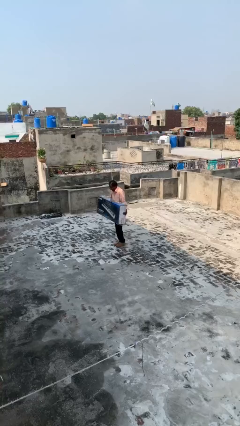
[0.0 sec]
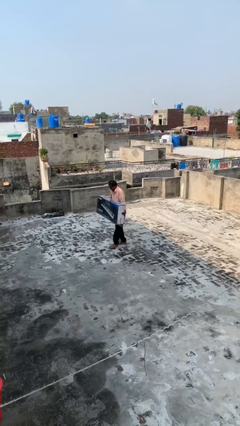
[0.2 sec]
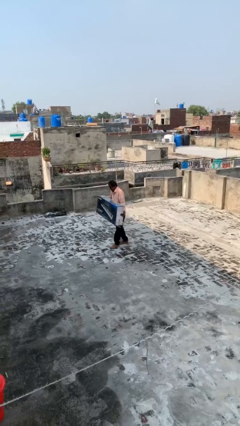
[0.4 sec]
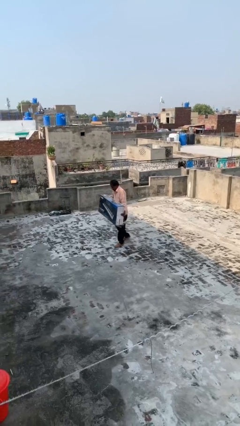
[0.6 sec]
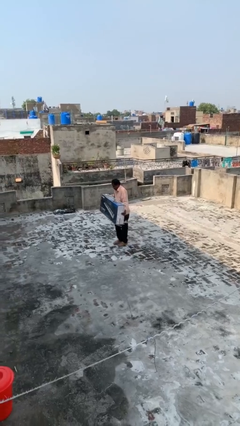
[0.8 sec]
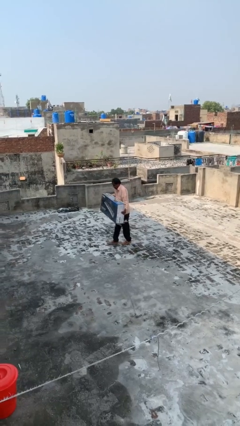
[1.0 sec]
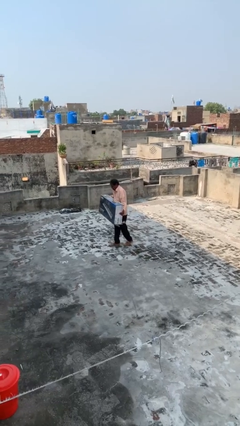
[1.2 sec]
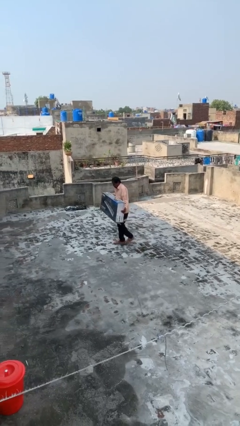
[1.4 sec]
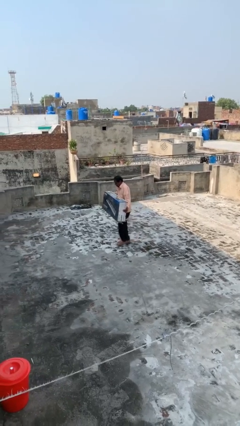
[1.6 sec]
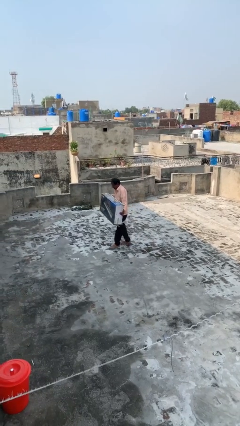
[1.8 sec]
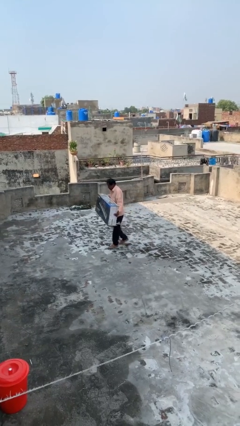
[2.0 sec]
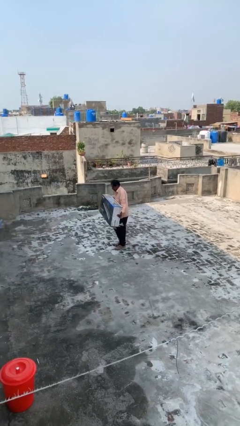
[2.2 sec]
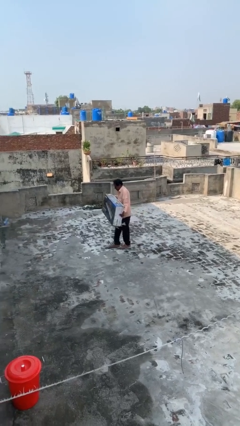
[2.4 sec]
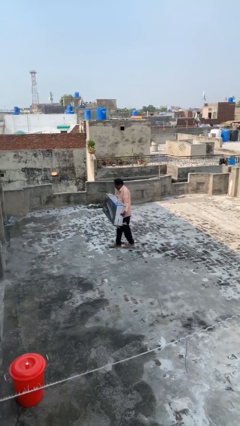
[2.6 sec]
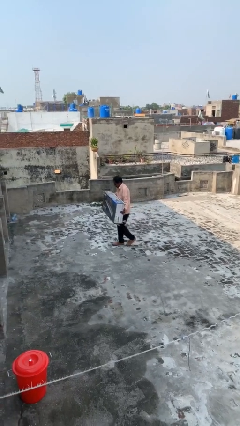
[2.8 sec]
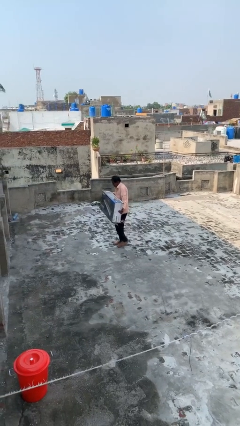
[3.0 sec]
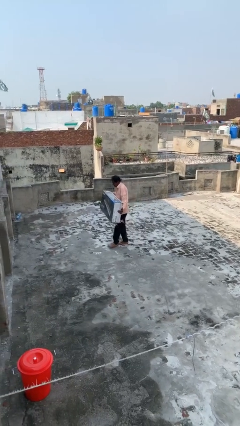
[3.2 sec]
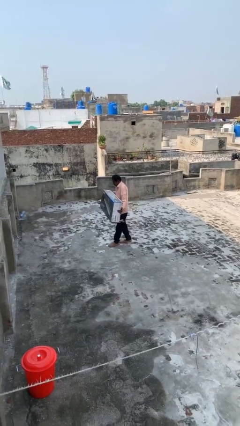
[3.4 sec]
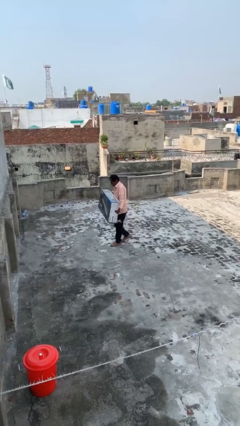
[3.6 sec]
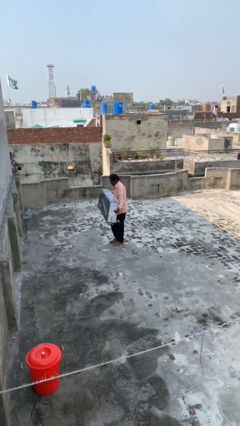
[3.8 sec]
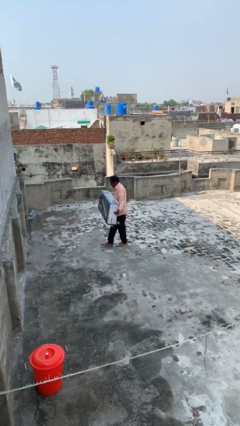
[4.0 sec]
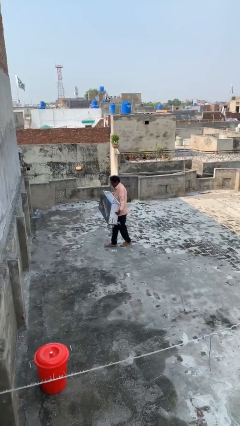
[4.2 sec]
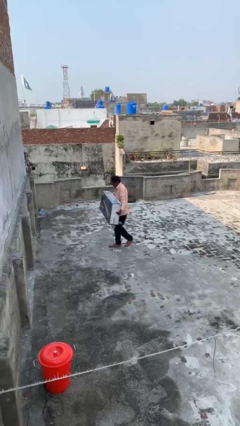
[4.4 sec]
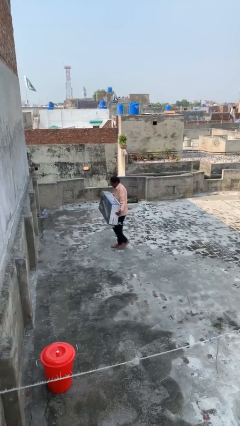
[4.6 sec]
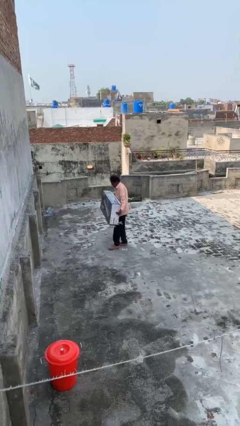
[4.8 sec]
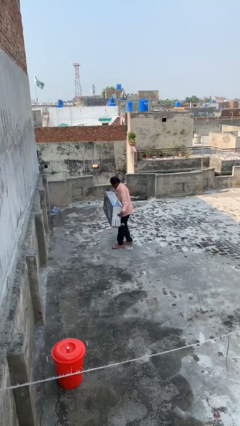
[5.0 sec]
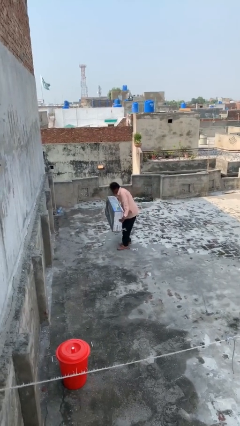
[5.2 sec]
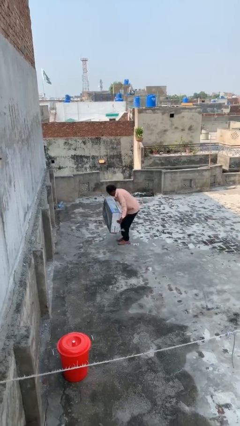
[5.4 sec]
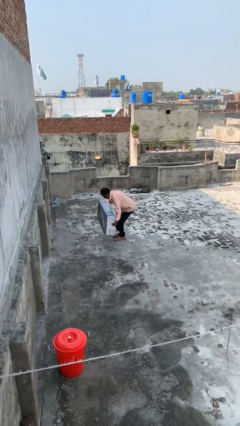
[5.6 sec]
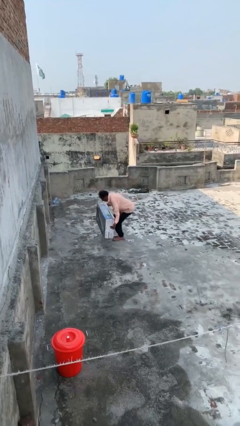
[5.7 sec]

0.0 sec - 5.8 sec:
person carries heavy object

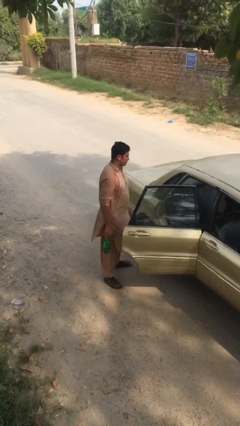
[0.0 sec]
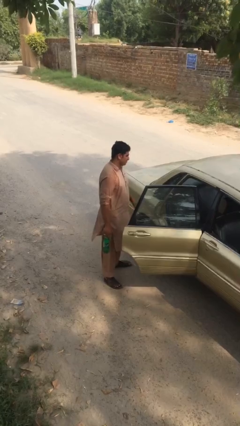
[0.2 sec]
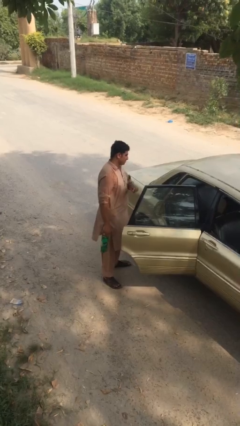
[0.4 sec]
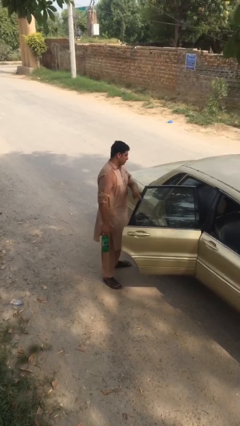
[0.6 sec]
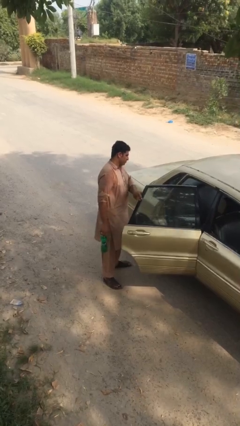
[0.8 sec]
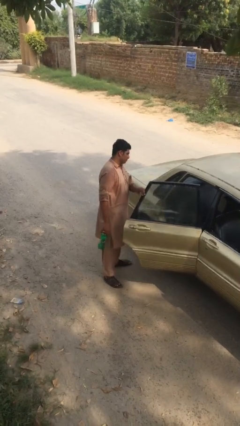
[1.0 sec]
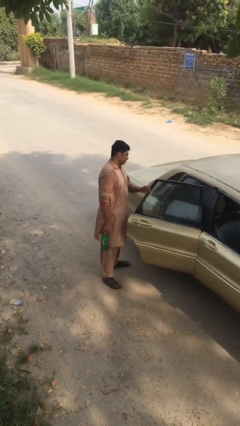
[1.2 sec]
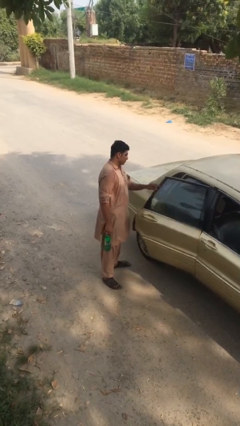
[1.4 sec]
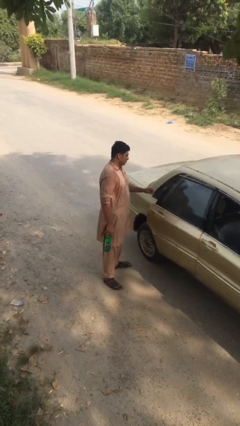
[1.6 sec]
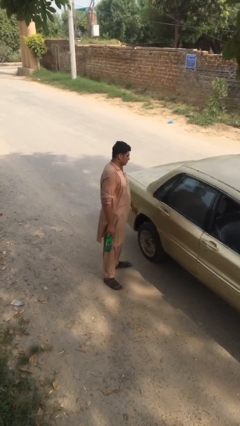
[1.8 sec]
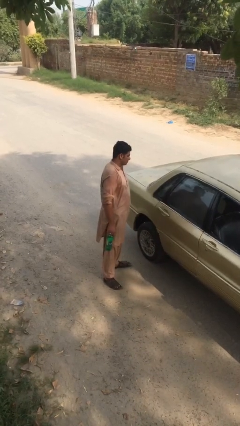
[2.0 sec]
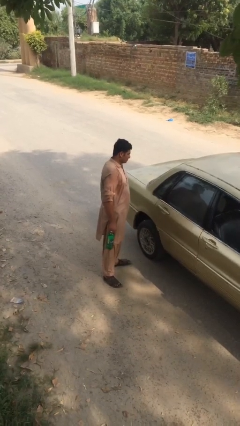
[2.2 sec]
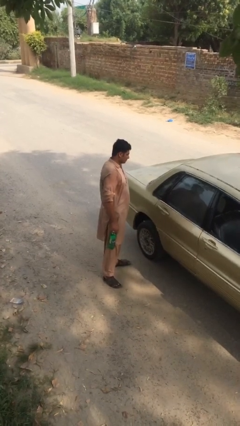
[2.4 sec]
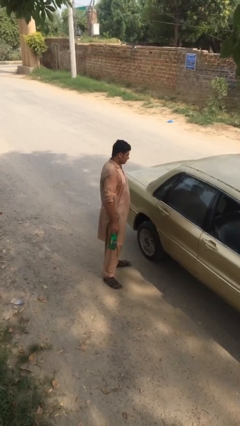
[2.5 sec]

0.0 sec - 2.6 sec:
person closes car door

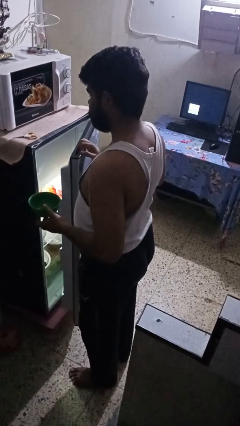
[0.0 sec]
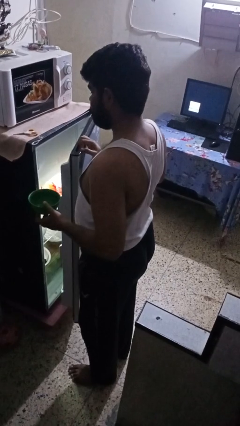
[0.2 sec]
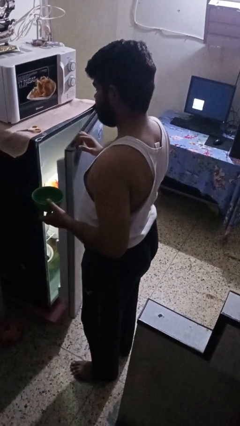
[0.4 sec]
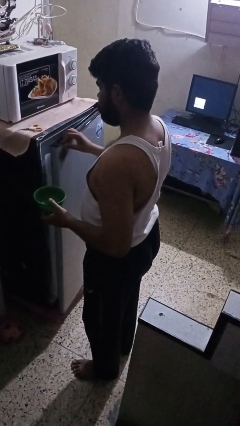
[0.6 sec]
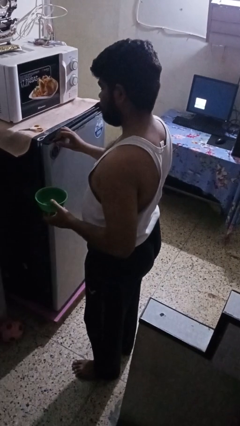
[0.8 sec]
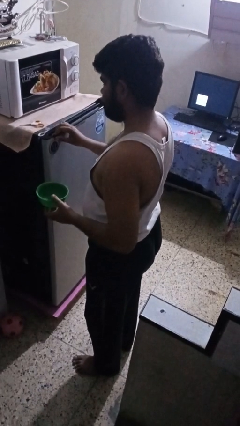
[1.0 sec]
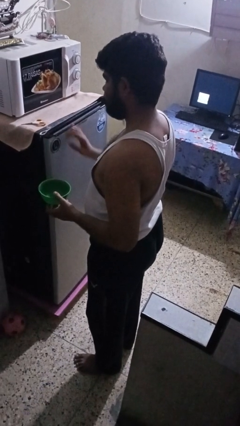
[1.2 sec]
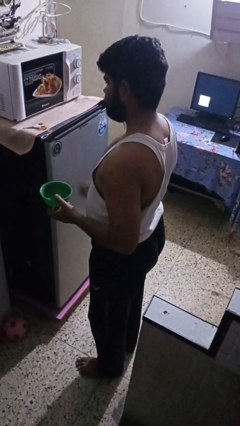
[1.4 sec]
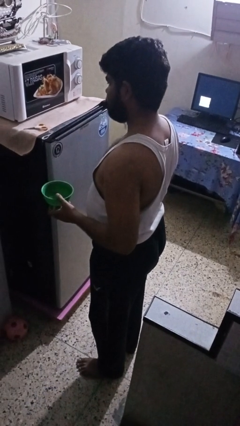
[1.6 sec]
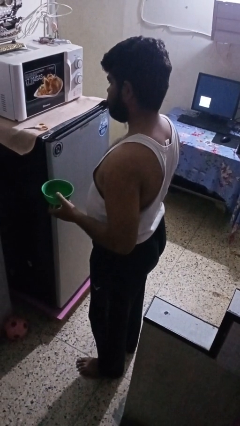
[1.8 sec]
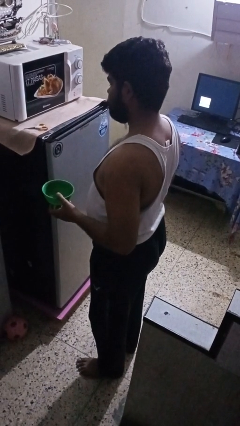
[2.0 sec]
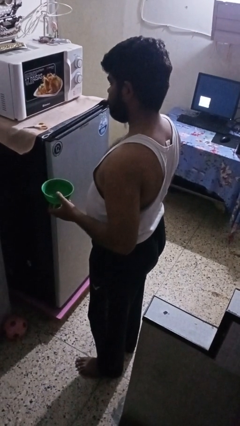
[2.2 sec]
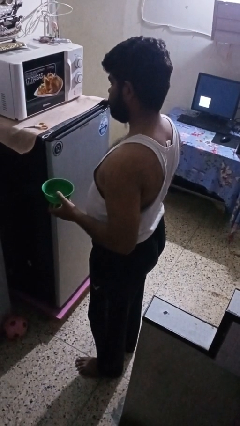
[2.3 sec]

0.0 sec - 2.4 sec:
person closes refrigerator

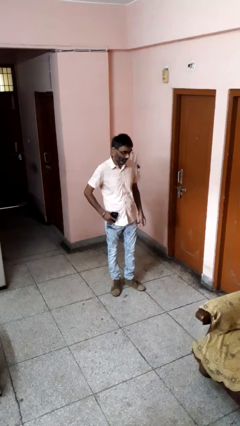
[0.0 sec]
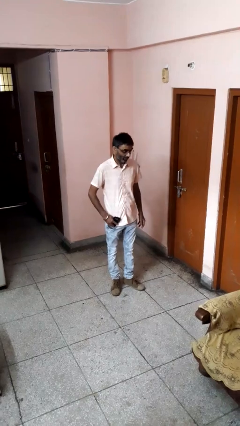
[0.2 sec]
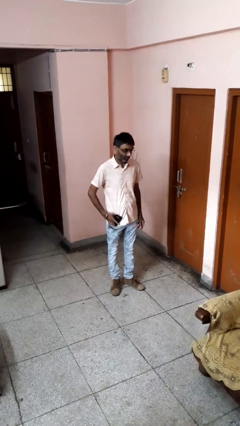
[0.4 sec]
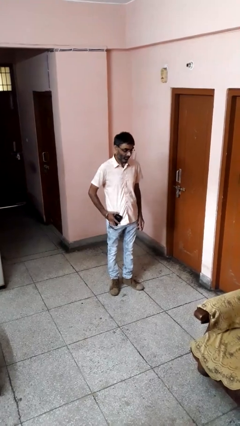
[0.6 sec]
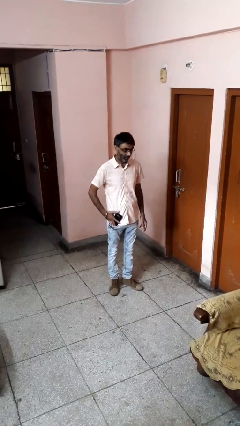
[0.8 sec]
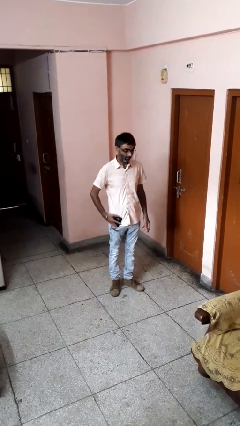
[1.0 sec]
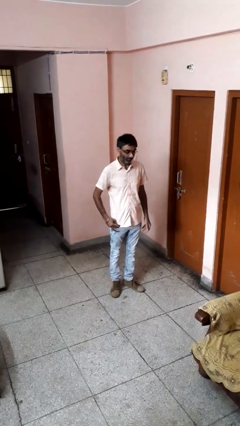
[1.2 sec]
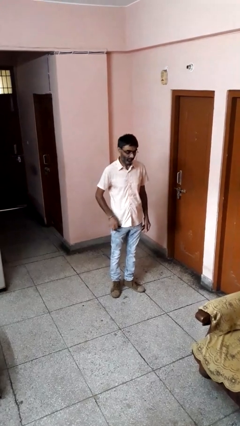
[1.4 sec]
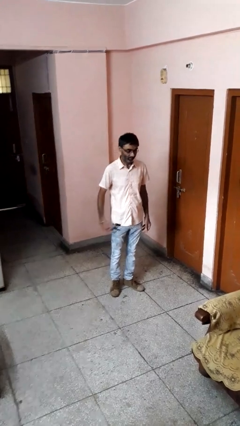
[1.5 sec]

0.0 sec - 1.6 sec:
person puts phone into pocket

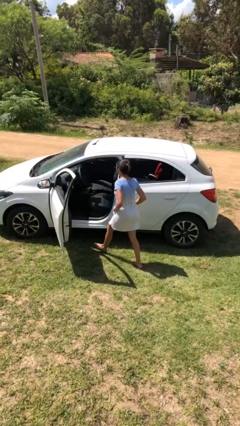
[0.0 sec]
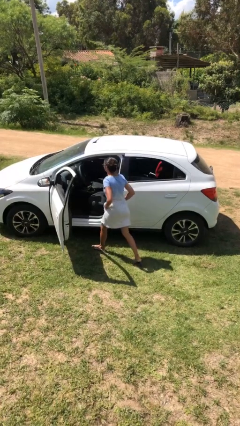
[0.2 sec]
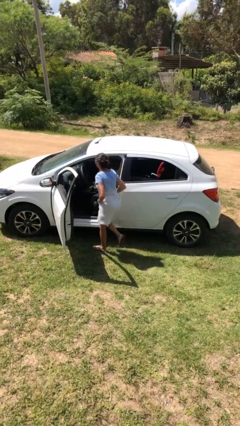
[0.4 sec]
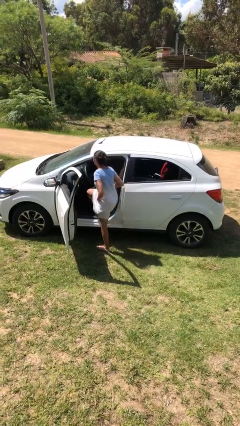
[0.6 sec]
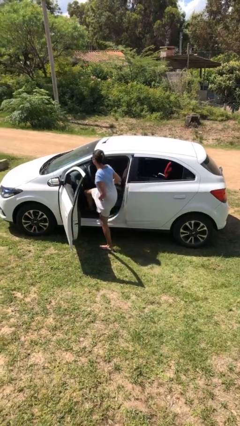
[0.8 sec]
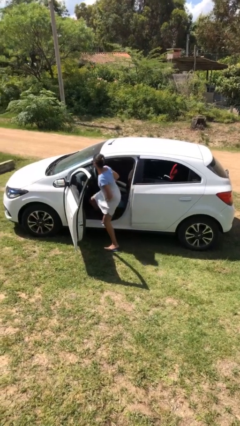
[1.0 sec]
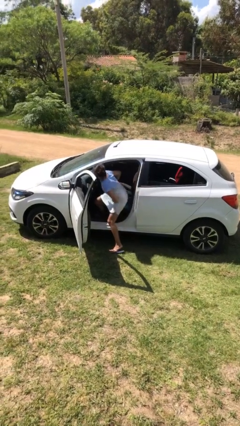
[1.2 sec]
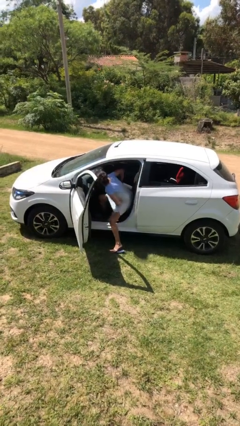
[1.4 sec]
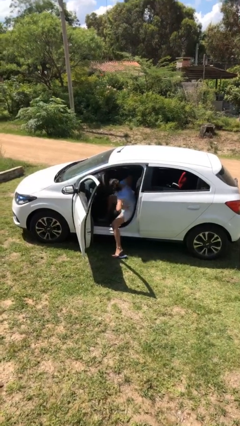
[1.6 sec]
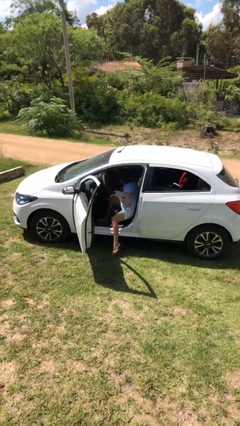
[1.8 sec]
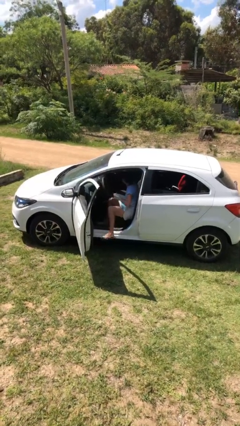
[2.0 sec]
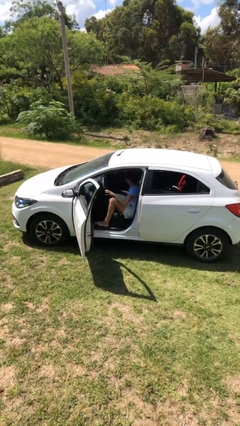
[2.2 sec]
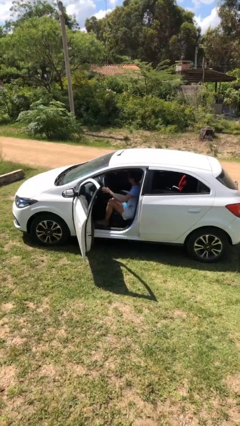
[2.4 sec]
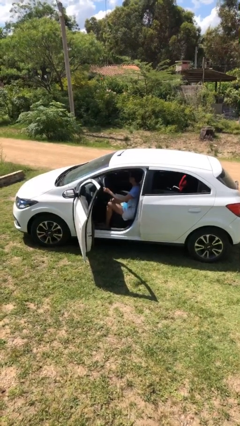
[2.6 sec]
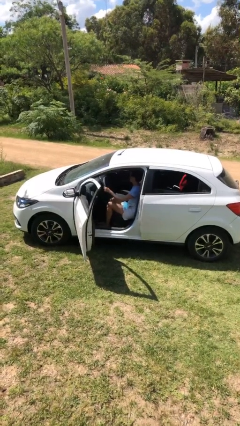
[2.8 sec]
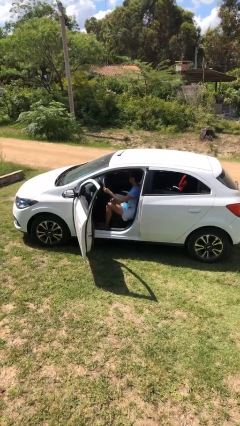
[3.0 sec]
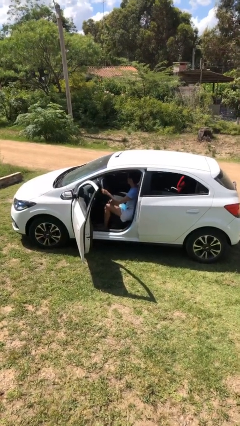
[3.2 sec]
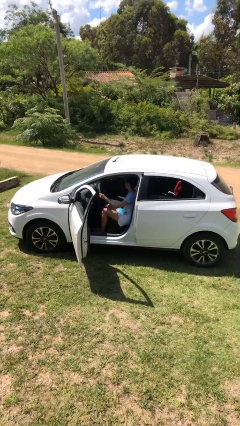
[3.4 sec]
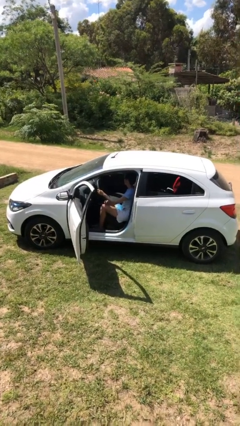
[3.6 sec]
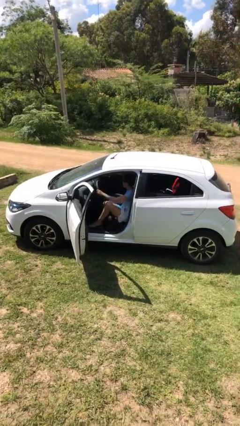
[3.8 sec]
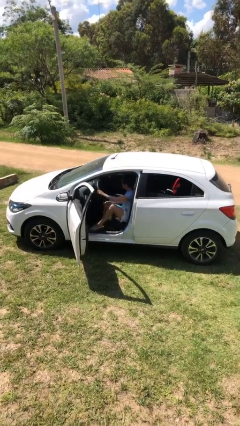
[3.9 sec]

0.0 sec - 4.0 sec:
person enters car

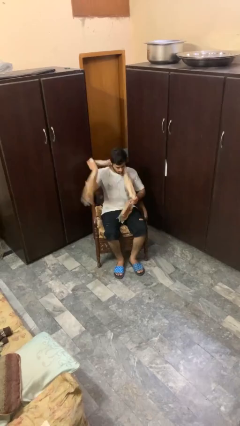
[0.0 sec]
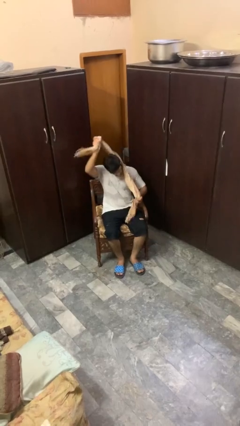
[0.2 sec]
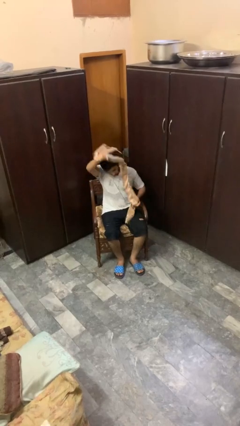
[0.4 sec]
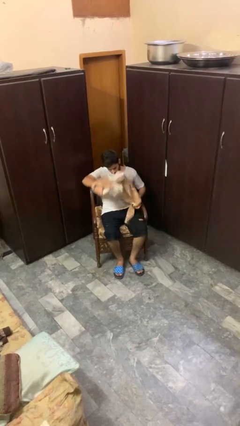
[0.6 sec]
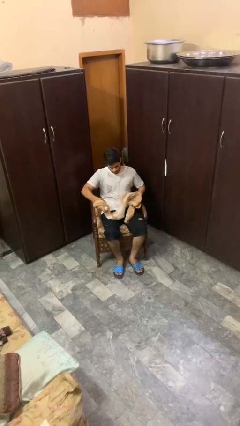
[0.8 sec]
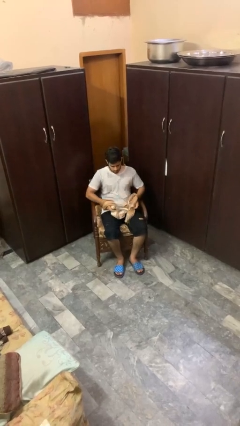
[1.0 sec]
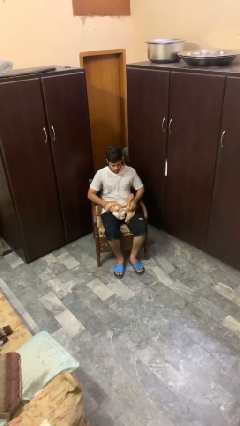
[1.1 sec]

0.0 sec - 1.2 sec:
person takes off scarf
